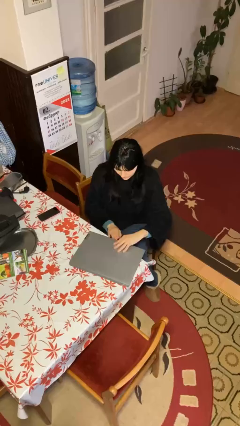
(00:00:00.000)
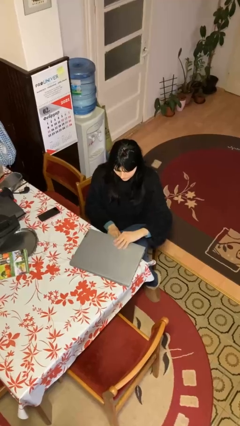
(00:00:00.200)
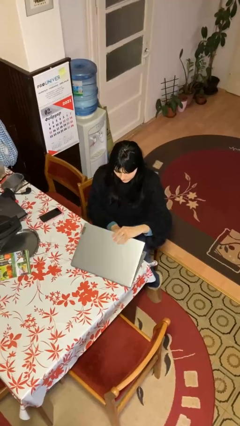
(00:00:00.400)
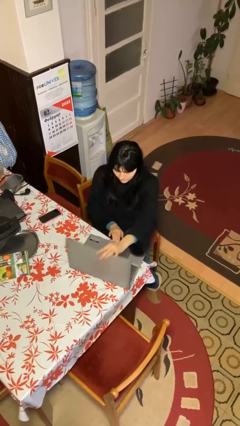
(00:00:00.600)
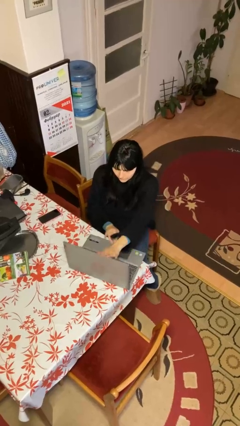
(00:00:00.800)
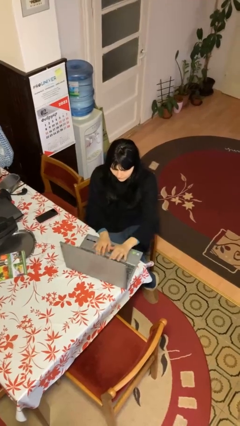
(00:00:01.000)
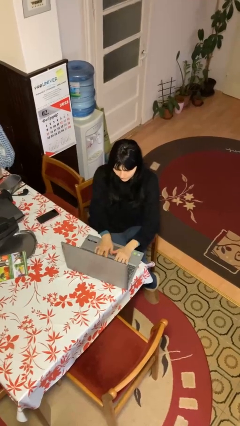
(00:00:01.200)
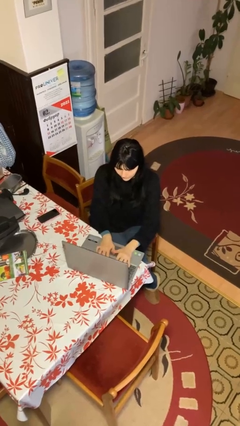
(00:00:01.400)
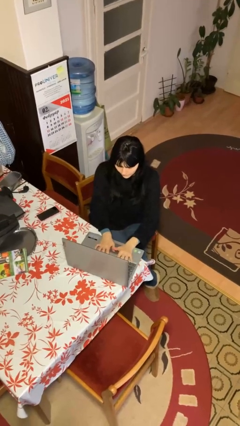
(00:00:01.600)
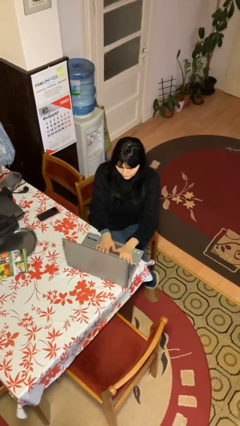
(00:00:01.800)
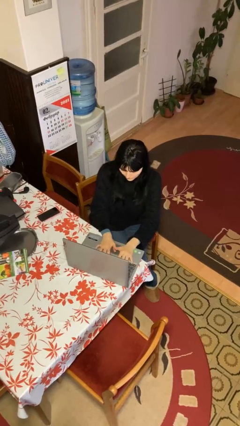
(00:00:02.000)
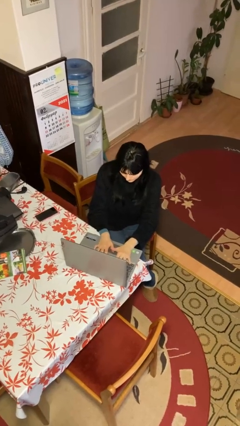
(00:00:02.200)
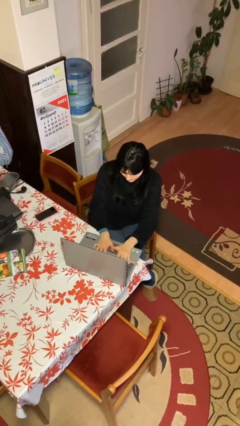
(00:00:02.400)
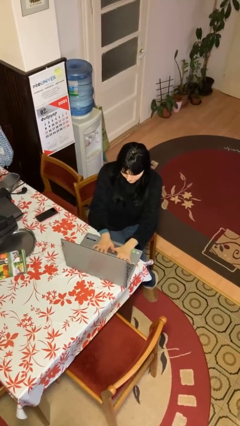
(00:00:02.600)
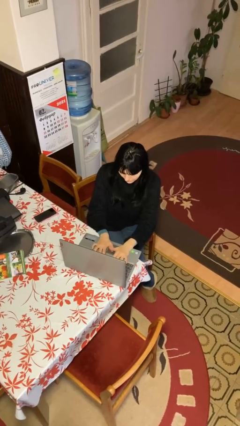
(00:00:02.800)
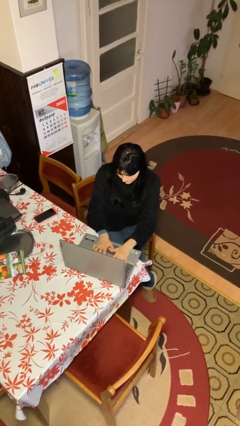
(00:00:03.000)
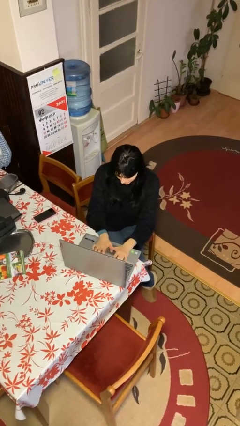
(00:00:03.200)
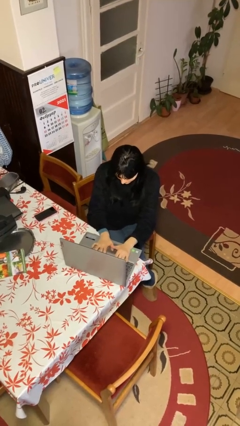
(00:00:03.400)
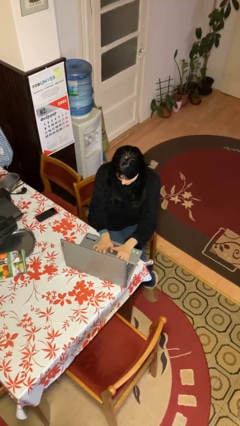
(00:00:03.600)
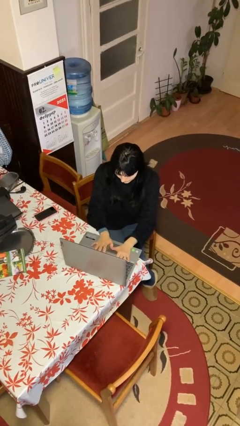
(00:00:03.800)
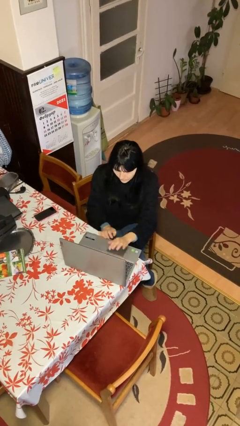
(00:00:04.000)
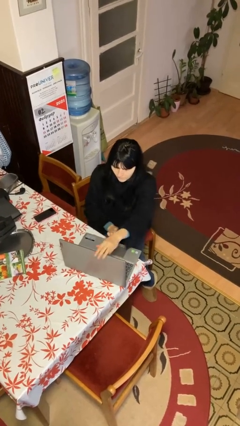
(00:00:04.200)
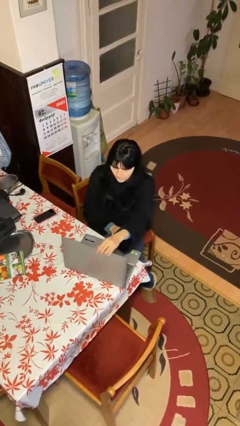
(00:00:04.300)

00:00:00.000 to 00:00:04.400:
person interacts with laptop

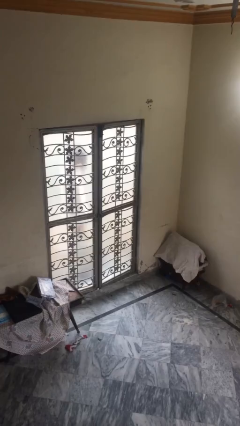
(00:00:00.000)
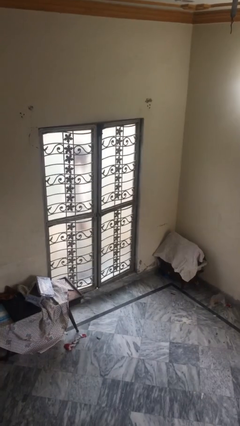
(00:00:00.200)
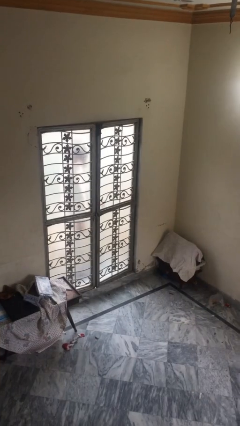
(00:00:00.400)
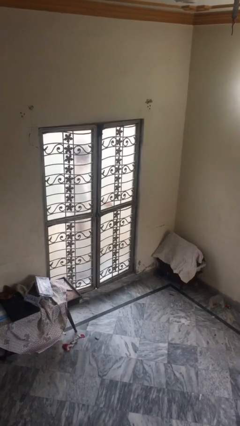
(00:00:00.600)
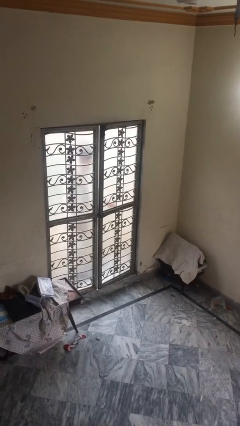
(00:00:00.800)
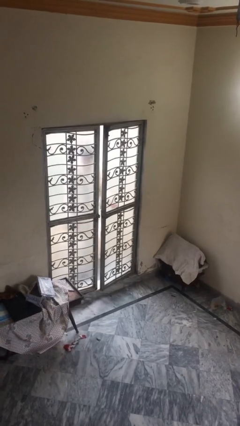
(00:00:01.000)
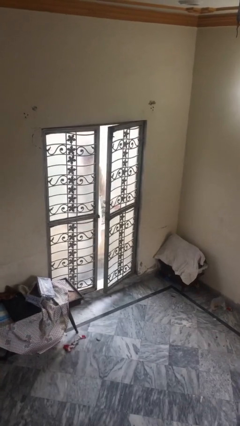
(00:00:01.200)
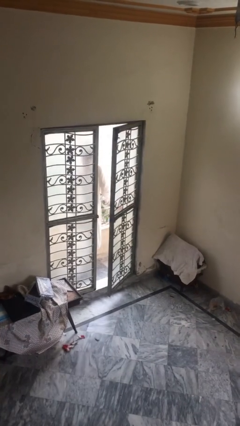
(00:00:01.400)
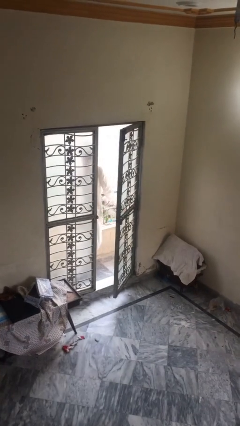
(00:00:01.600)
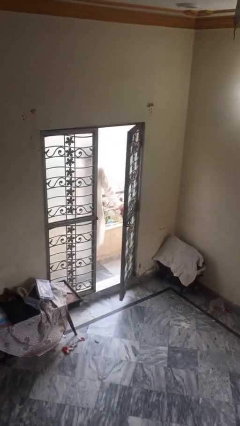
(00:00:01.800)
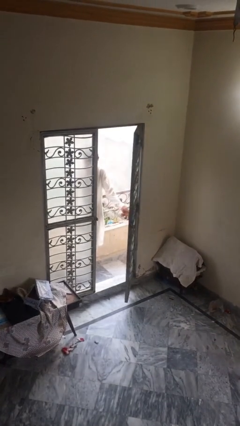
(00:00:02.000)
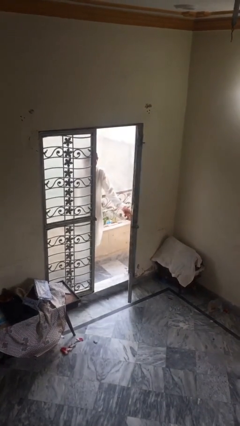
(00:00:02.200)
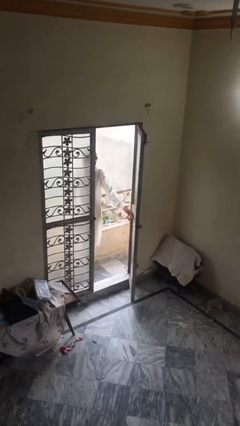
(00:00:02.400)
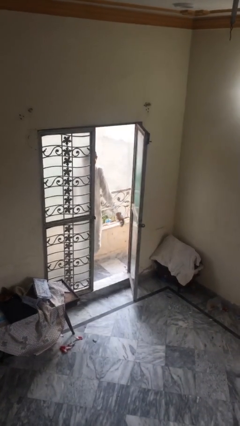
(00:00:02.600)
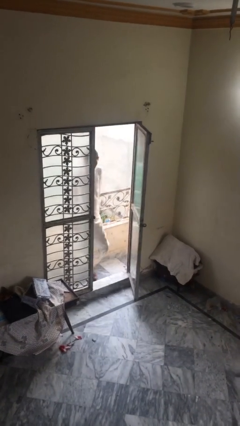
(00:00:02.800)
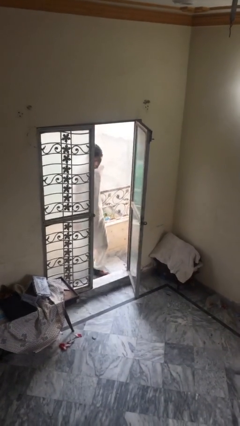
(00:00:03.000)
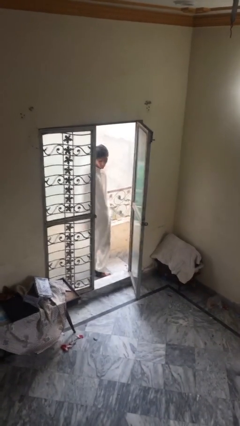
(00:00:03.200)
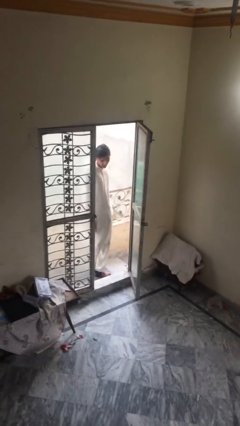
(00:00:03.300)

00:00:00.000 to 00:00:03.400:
person opens facility door

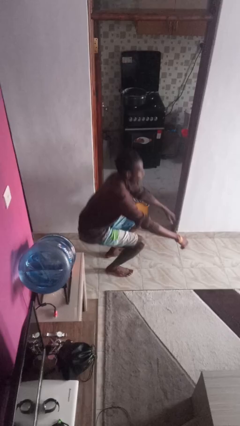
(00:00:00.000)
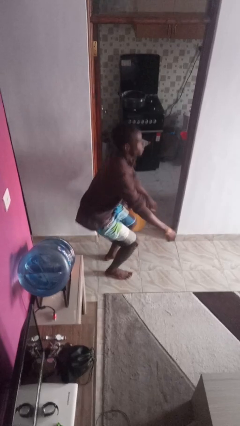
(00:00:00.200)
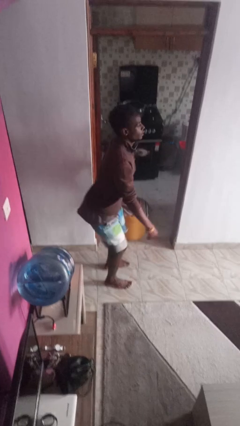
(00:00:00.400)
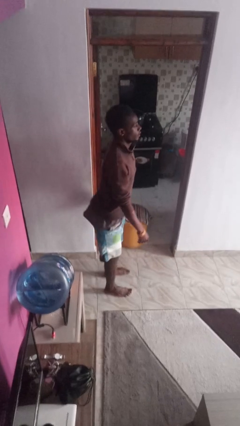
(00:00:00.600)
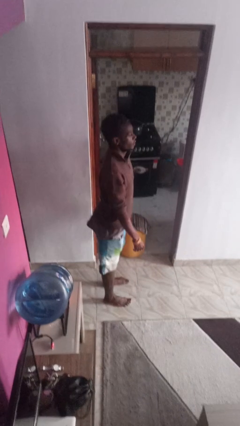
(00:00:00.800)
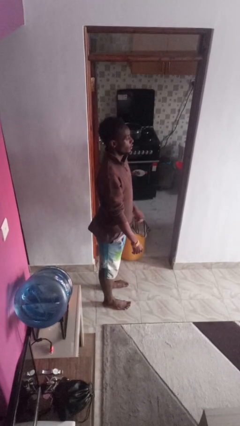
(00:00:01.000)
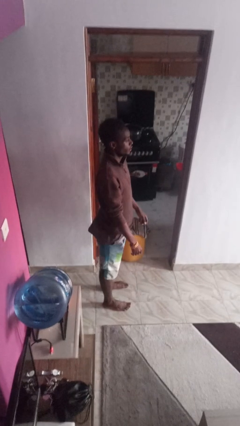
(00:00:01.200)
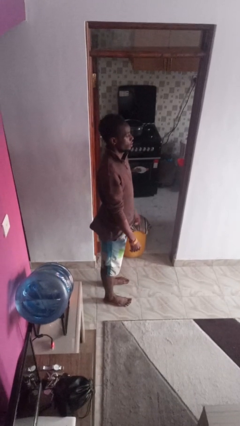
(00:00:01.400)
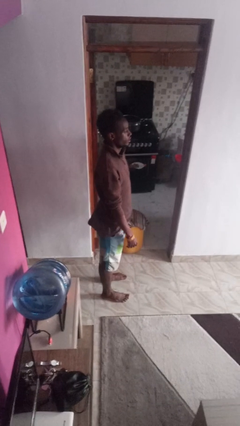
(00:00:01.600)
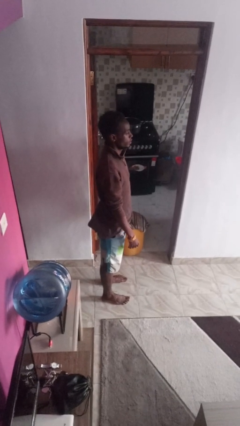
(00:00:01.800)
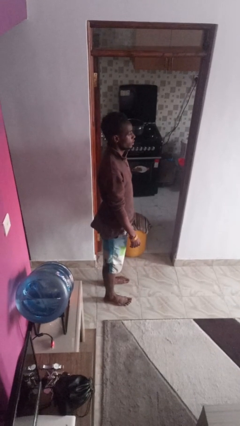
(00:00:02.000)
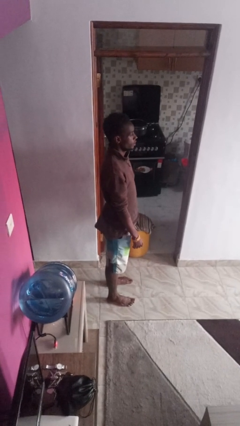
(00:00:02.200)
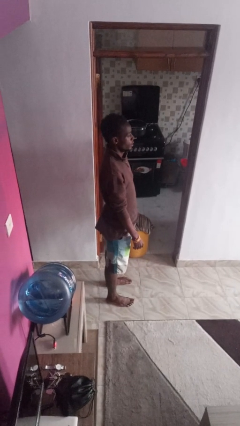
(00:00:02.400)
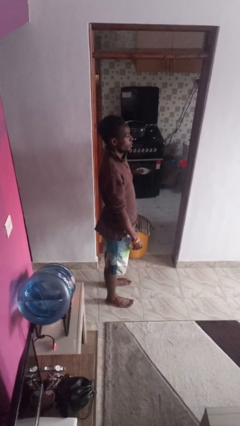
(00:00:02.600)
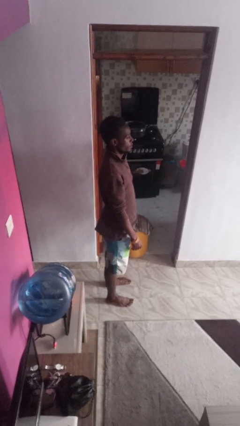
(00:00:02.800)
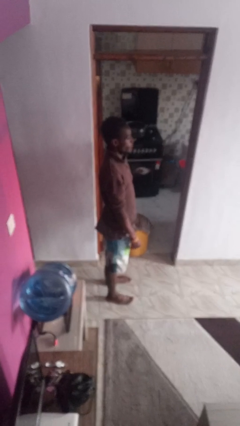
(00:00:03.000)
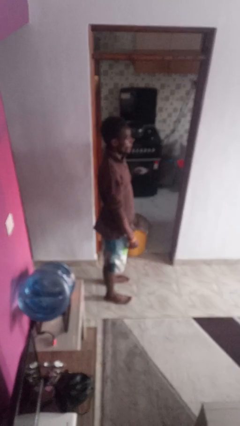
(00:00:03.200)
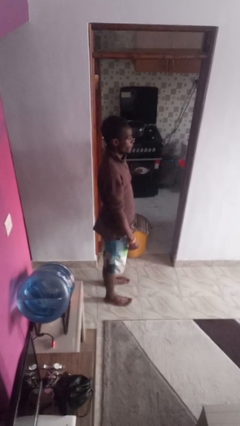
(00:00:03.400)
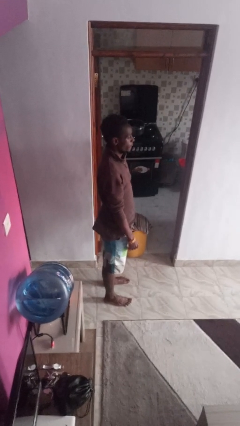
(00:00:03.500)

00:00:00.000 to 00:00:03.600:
person stands up

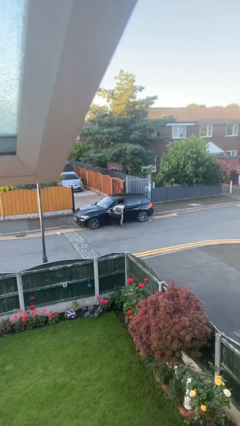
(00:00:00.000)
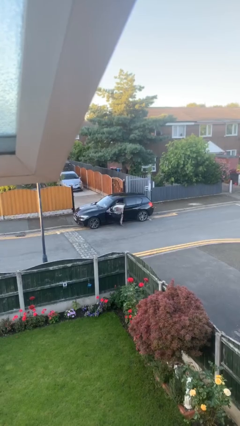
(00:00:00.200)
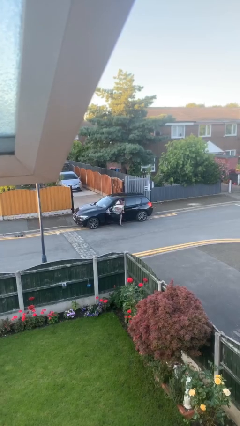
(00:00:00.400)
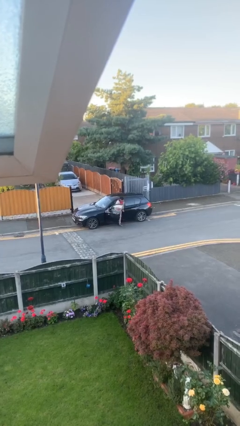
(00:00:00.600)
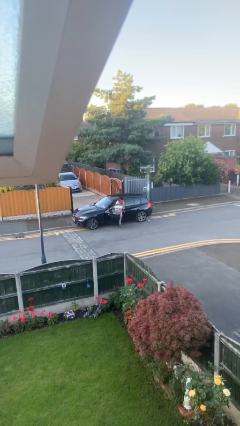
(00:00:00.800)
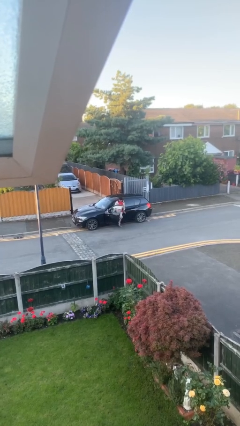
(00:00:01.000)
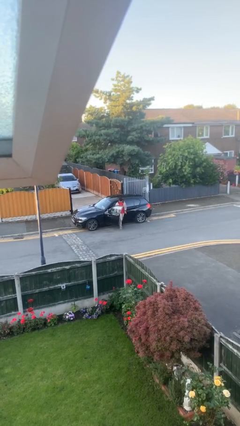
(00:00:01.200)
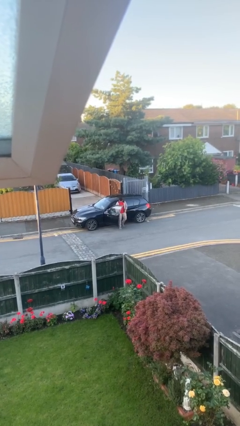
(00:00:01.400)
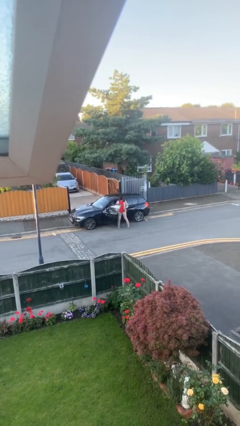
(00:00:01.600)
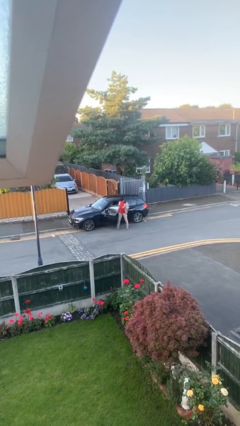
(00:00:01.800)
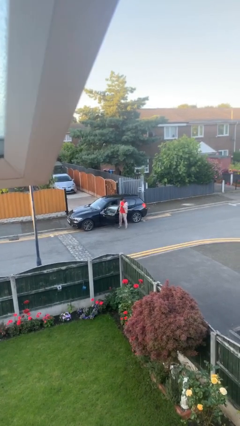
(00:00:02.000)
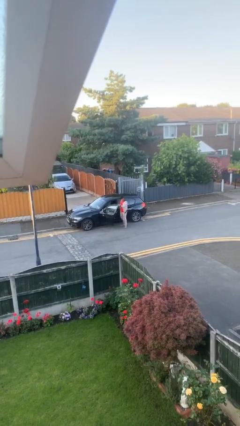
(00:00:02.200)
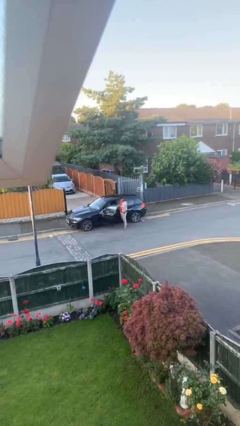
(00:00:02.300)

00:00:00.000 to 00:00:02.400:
person exits car

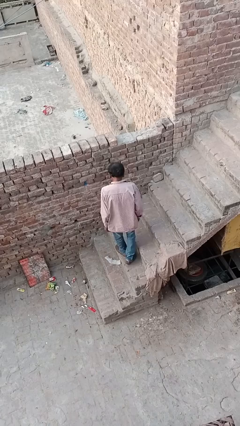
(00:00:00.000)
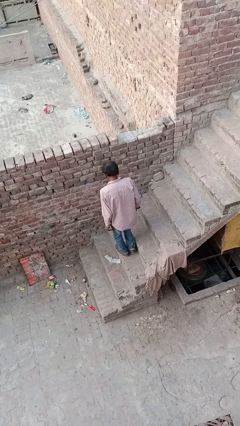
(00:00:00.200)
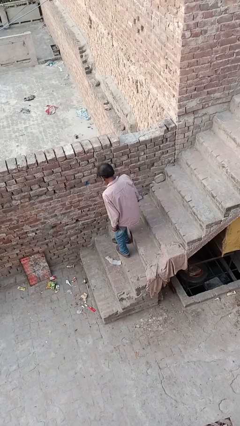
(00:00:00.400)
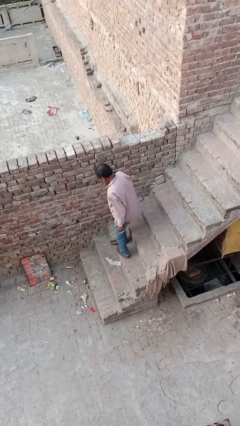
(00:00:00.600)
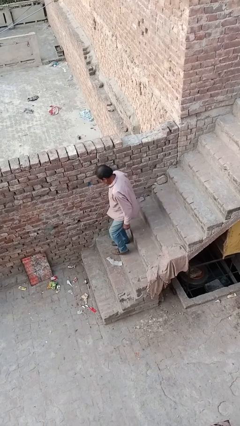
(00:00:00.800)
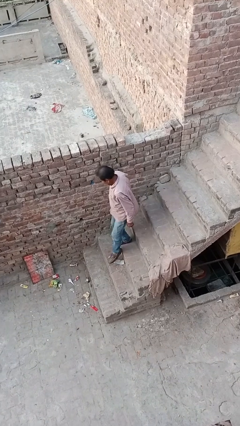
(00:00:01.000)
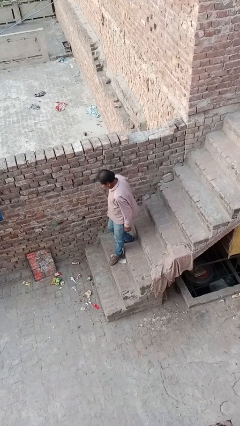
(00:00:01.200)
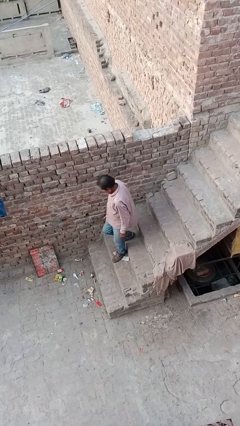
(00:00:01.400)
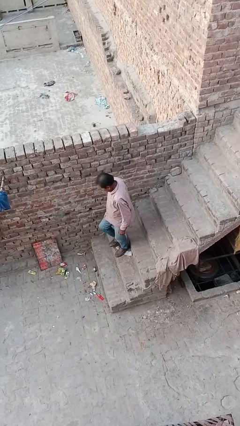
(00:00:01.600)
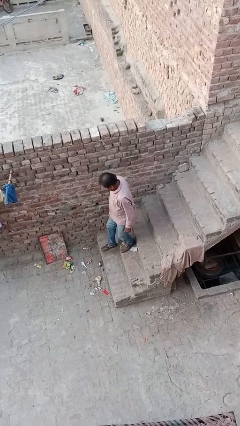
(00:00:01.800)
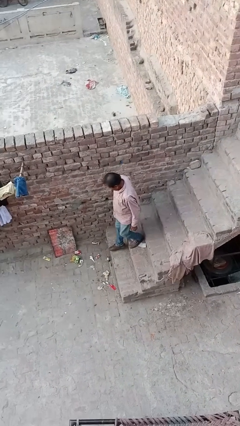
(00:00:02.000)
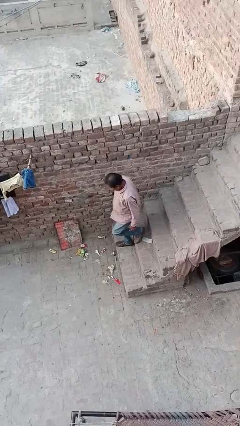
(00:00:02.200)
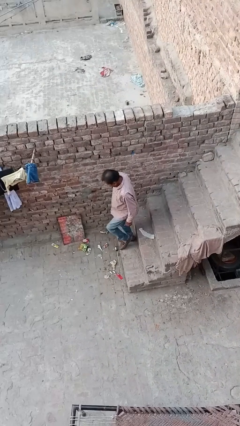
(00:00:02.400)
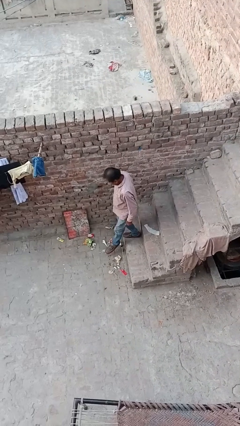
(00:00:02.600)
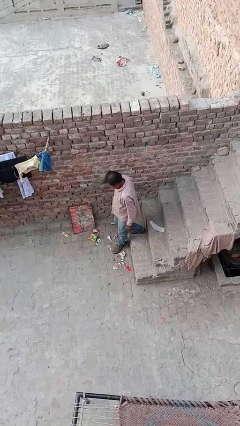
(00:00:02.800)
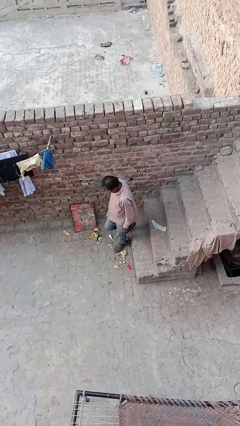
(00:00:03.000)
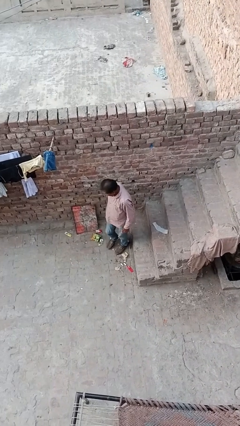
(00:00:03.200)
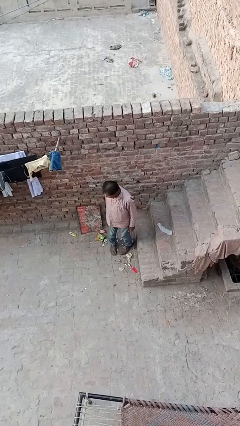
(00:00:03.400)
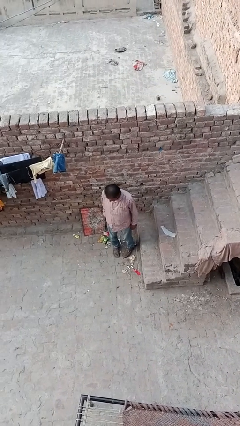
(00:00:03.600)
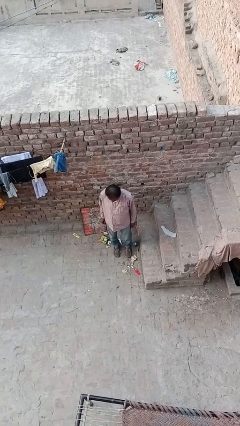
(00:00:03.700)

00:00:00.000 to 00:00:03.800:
person climbs down stairs
